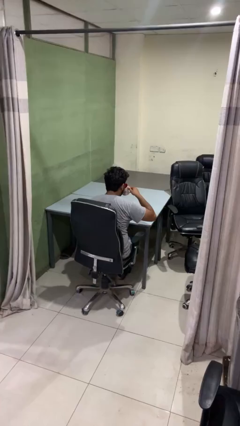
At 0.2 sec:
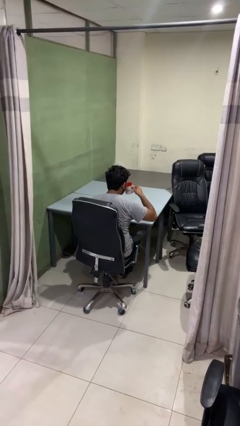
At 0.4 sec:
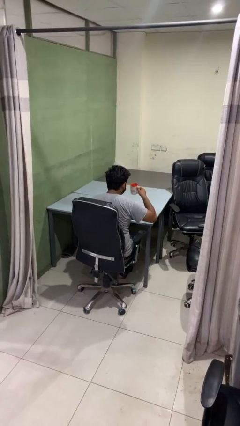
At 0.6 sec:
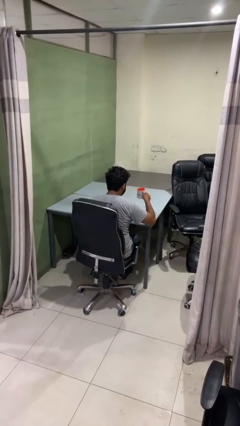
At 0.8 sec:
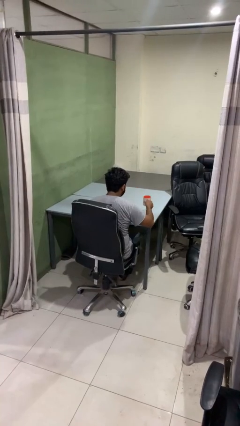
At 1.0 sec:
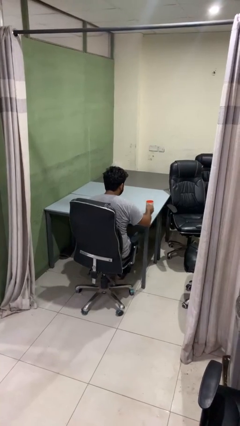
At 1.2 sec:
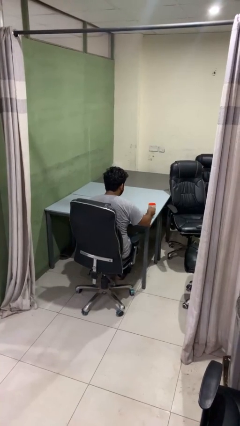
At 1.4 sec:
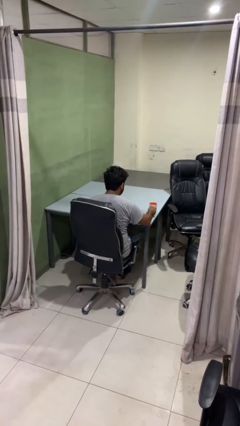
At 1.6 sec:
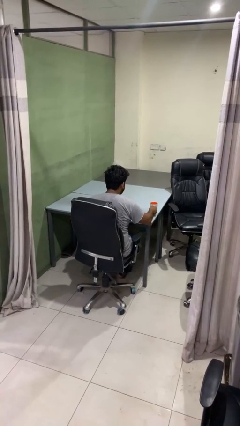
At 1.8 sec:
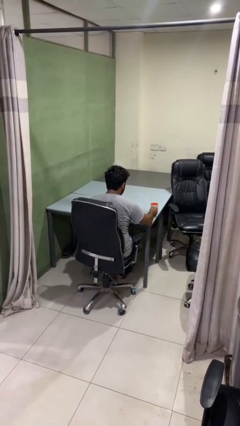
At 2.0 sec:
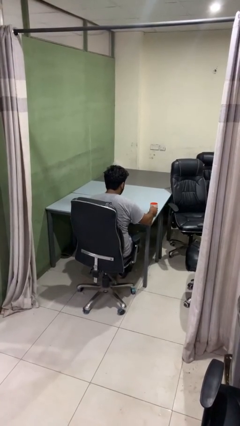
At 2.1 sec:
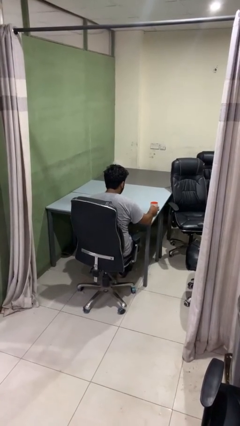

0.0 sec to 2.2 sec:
person puts down object on table

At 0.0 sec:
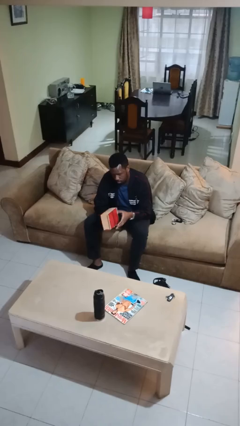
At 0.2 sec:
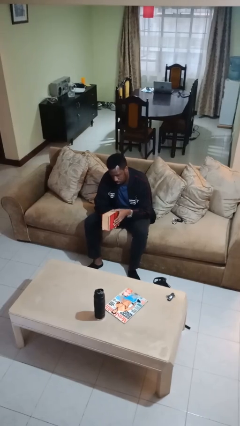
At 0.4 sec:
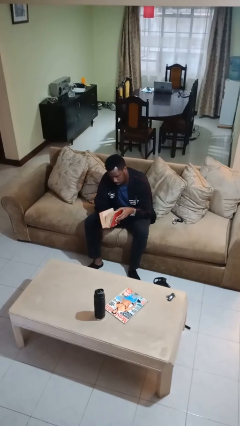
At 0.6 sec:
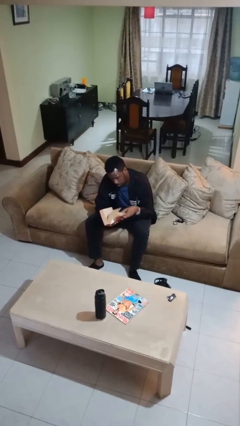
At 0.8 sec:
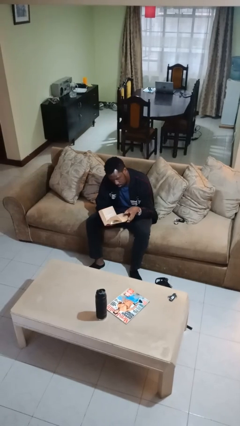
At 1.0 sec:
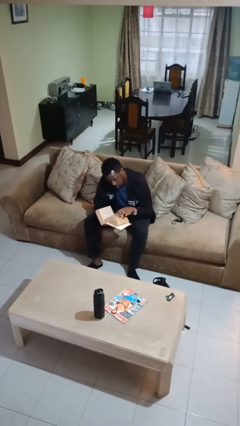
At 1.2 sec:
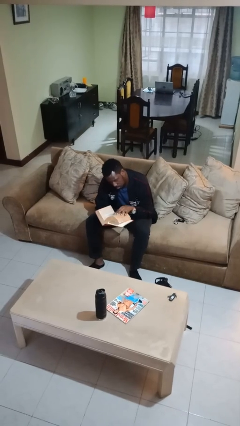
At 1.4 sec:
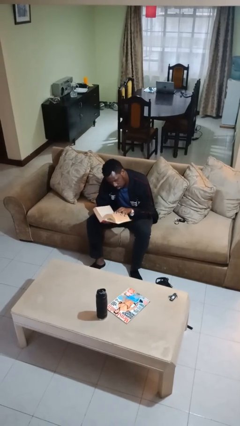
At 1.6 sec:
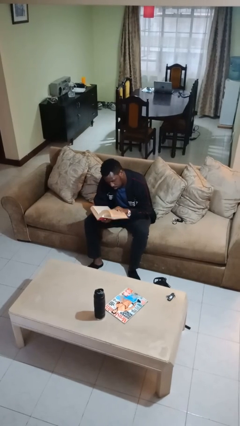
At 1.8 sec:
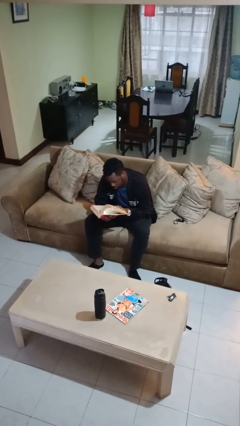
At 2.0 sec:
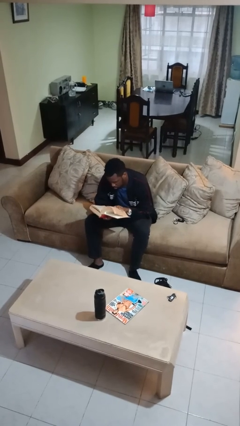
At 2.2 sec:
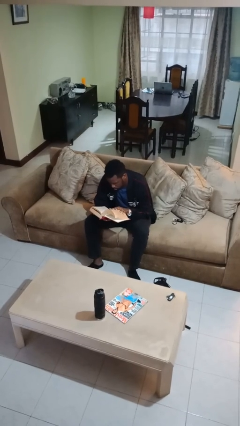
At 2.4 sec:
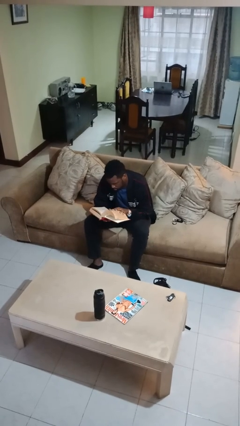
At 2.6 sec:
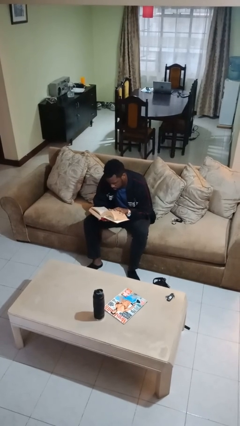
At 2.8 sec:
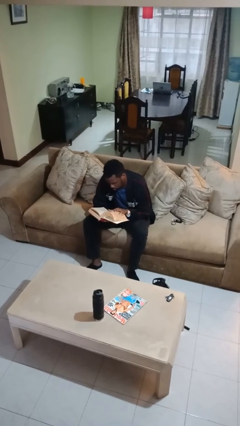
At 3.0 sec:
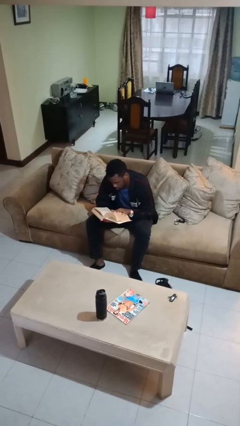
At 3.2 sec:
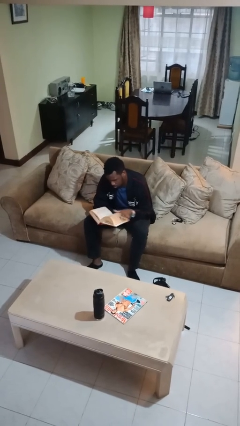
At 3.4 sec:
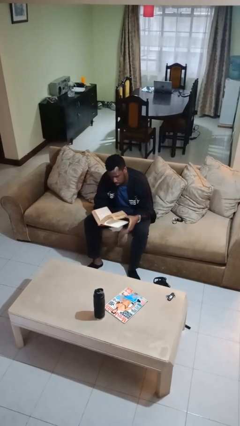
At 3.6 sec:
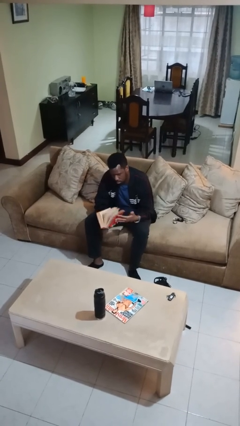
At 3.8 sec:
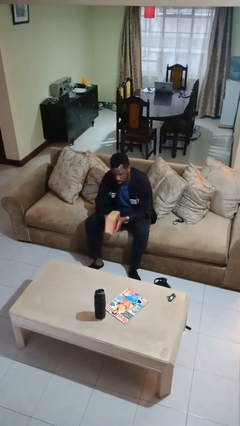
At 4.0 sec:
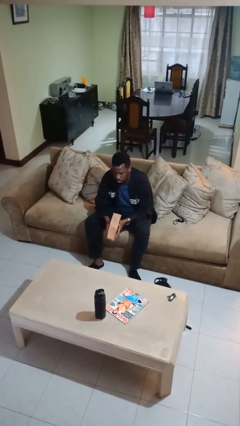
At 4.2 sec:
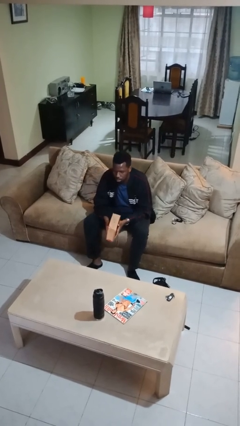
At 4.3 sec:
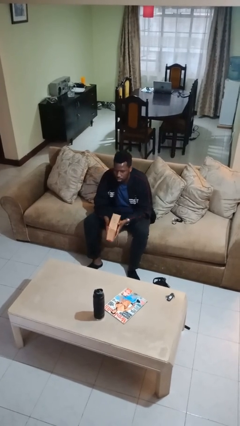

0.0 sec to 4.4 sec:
person reads book

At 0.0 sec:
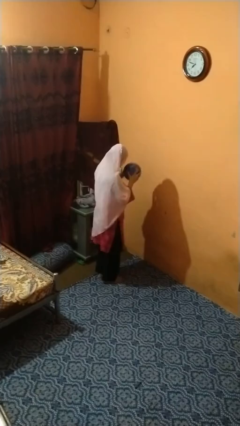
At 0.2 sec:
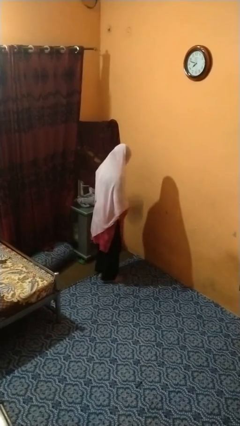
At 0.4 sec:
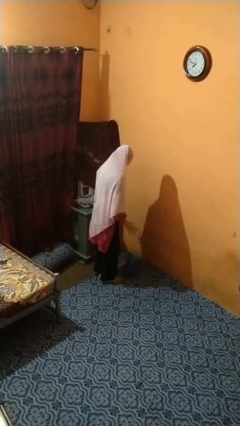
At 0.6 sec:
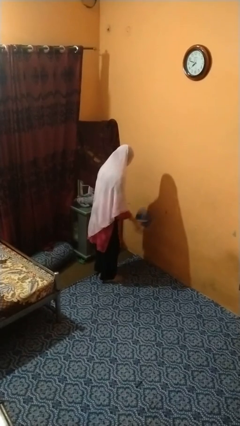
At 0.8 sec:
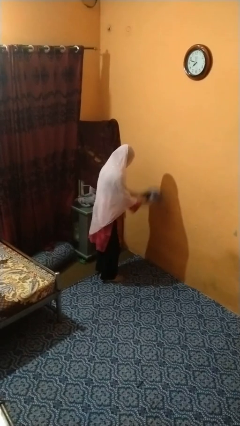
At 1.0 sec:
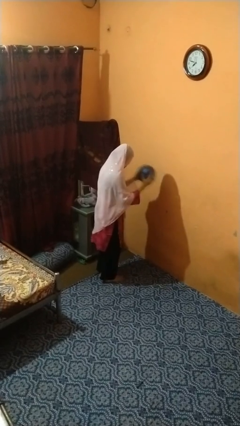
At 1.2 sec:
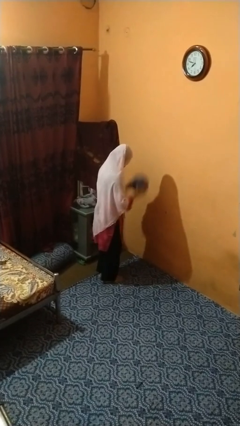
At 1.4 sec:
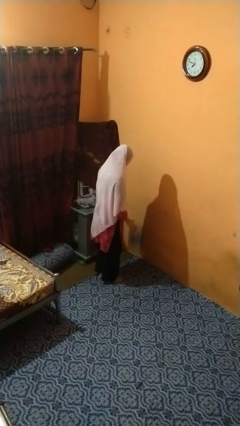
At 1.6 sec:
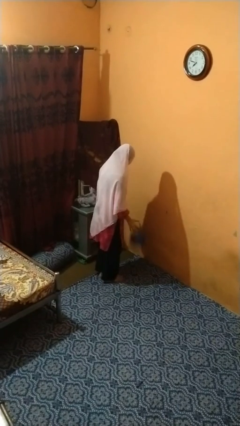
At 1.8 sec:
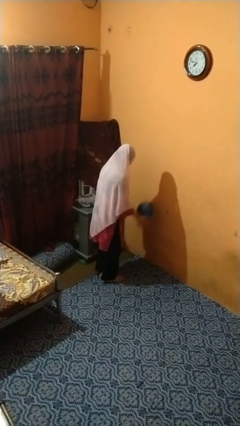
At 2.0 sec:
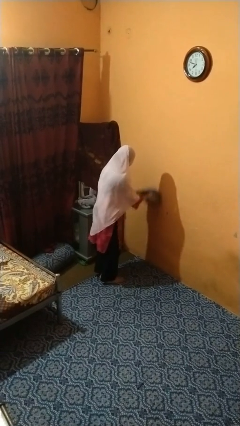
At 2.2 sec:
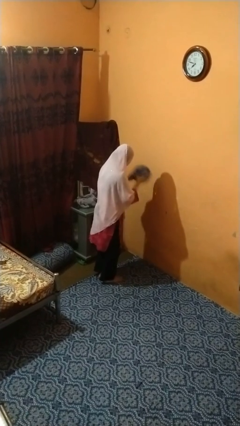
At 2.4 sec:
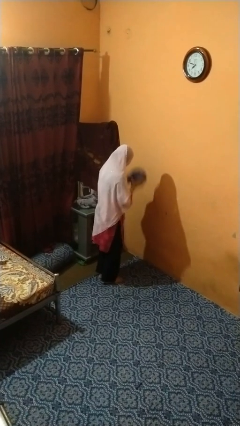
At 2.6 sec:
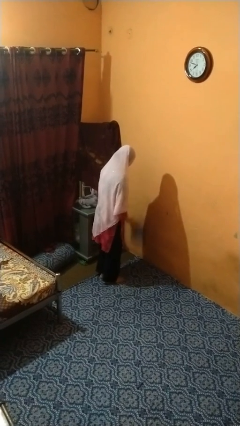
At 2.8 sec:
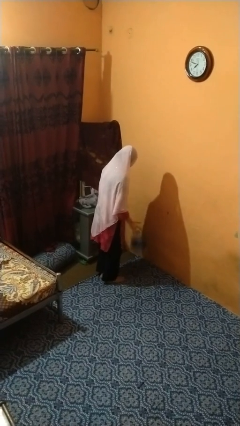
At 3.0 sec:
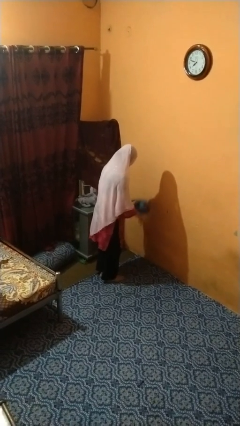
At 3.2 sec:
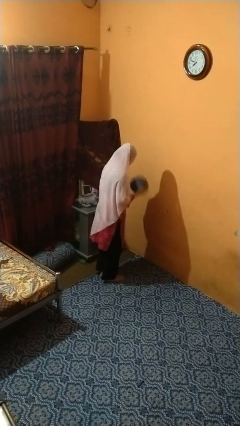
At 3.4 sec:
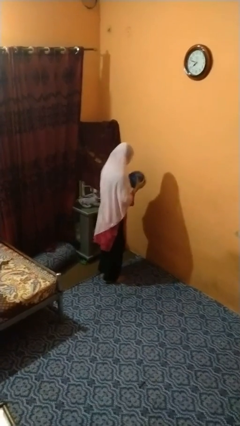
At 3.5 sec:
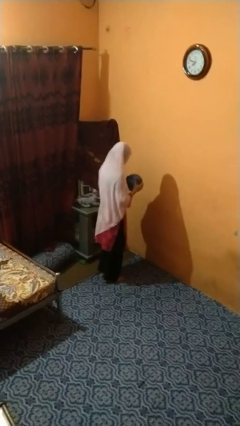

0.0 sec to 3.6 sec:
person bounces ball on floor

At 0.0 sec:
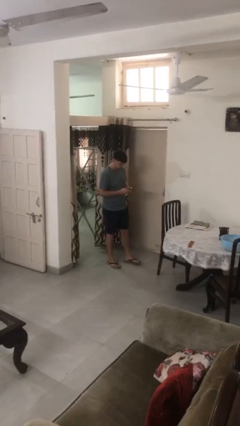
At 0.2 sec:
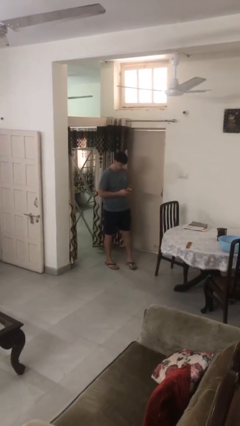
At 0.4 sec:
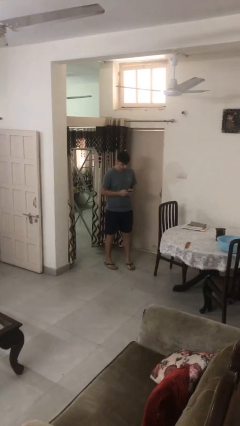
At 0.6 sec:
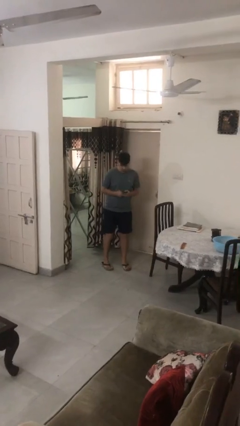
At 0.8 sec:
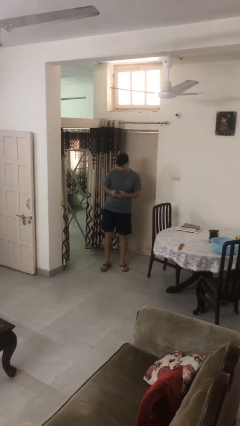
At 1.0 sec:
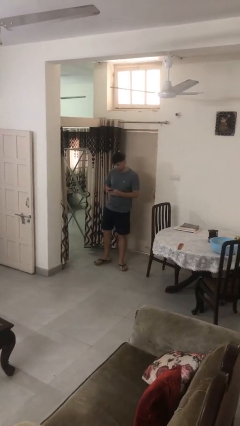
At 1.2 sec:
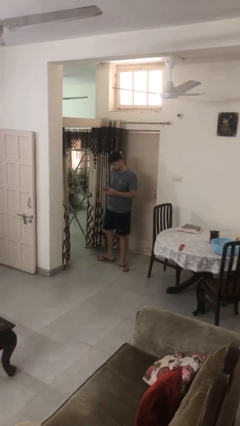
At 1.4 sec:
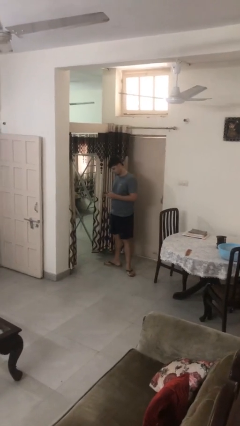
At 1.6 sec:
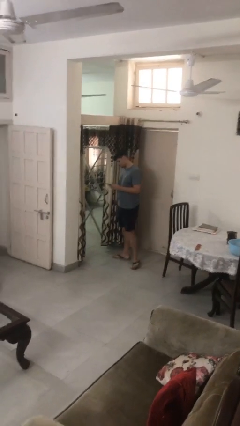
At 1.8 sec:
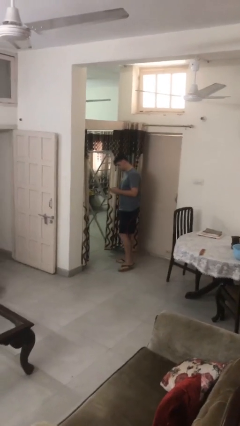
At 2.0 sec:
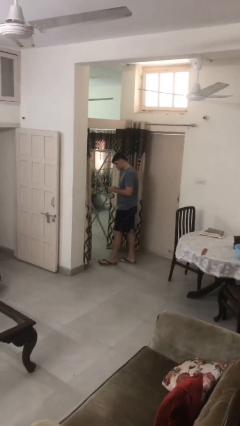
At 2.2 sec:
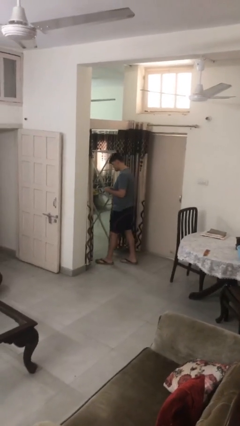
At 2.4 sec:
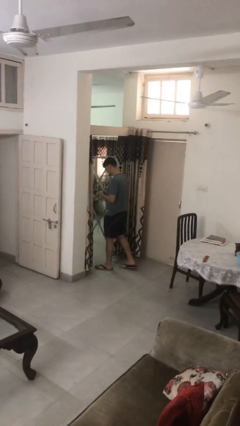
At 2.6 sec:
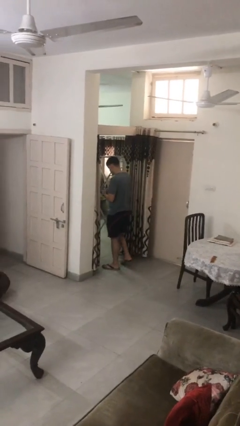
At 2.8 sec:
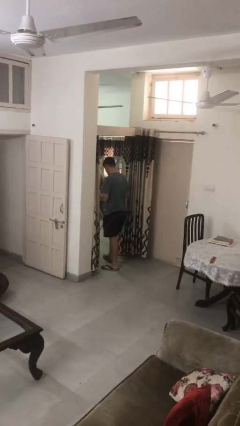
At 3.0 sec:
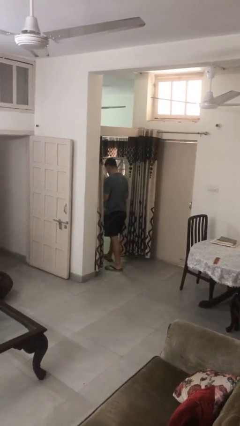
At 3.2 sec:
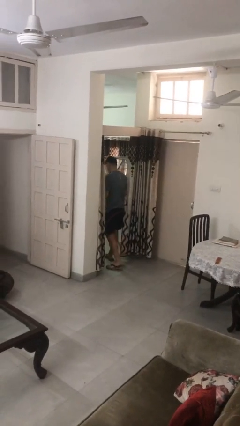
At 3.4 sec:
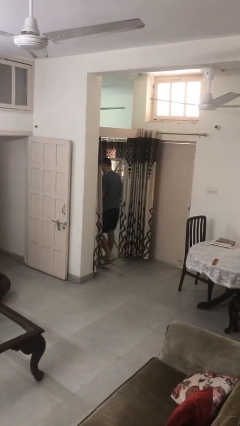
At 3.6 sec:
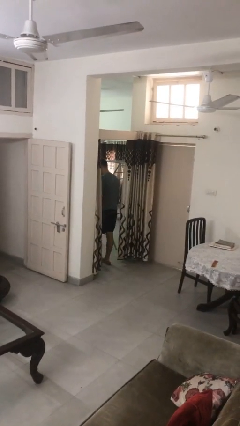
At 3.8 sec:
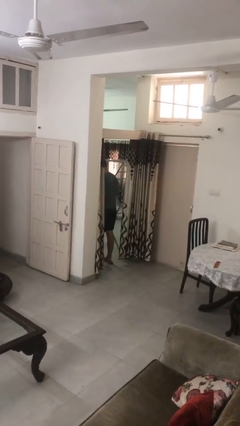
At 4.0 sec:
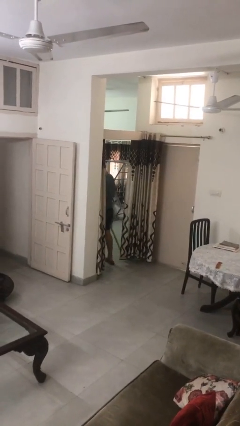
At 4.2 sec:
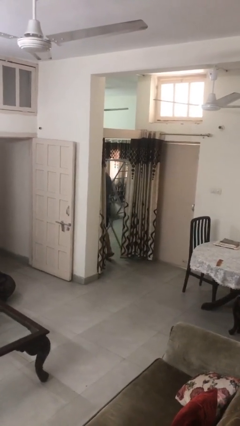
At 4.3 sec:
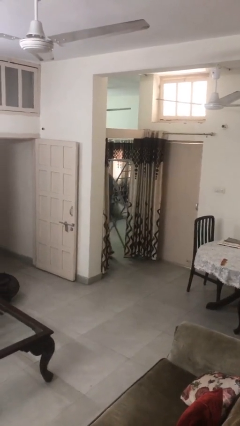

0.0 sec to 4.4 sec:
person exits scene through structure

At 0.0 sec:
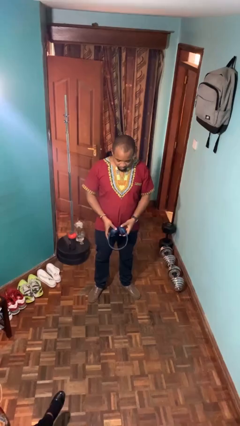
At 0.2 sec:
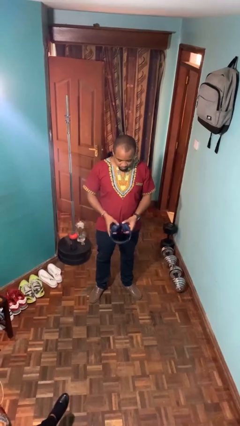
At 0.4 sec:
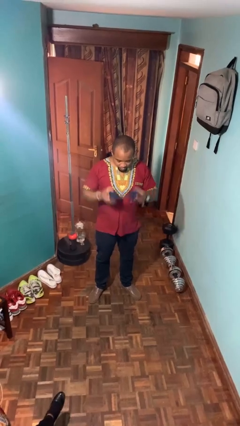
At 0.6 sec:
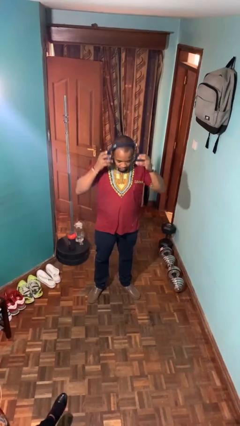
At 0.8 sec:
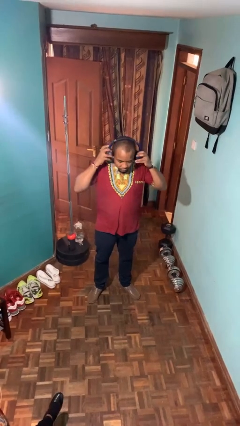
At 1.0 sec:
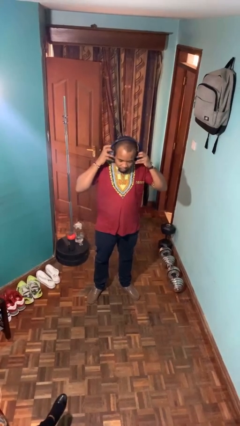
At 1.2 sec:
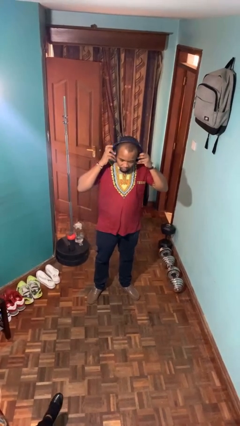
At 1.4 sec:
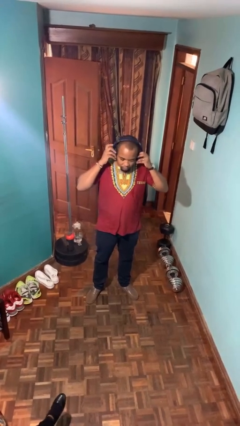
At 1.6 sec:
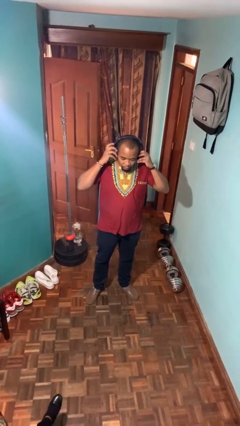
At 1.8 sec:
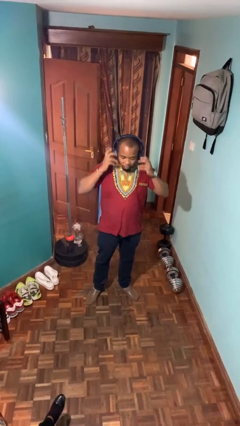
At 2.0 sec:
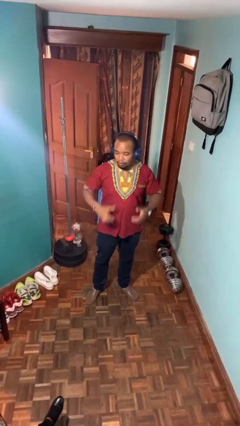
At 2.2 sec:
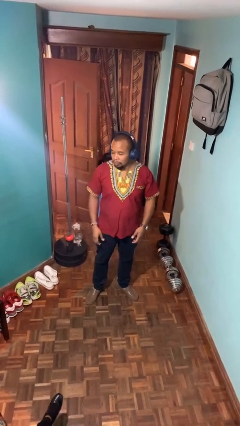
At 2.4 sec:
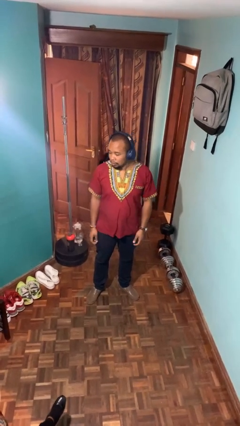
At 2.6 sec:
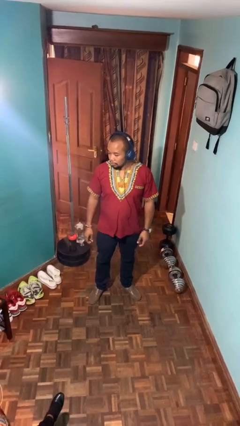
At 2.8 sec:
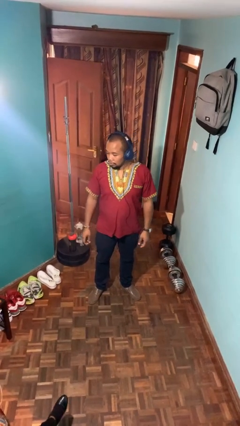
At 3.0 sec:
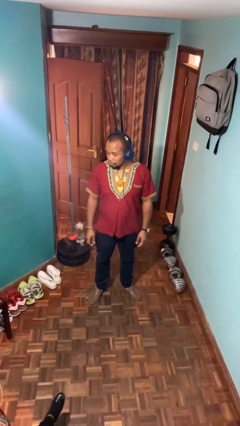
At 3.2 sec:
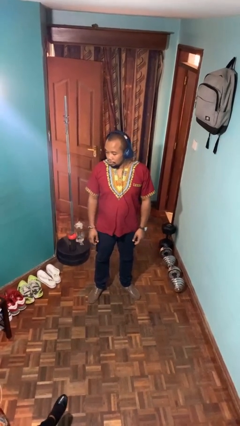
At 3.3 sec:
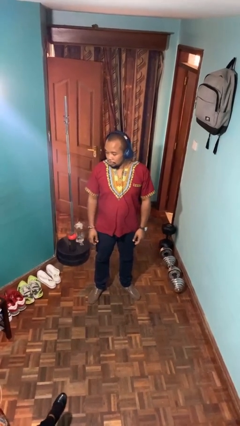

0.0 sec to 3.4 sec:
person puts on headphones
